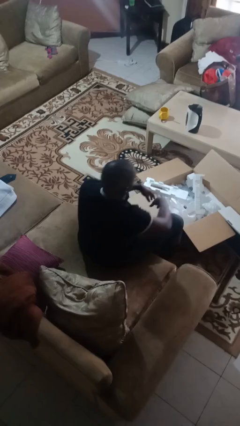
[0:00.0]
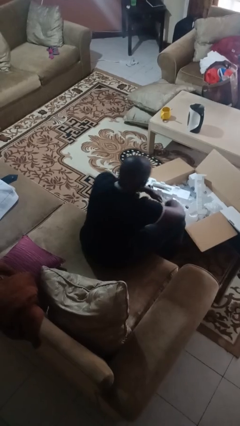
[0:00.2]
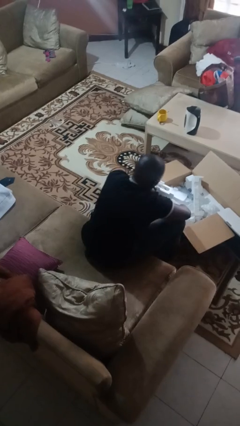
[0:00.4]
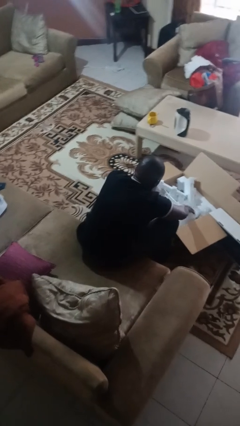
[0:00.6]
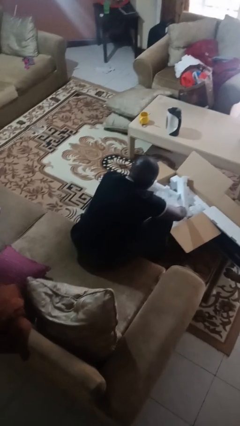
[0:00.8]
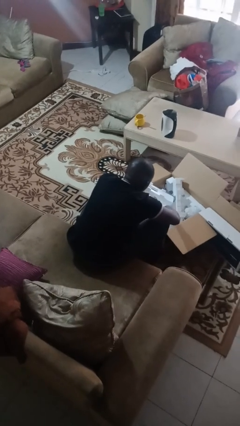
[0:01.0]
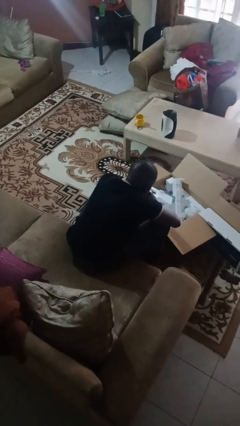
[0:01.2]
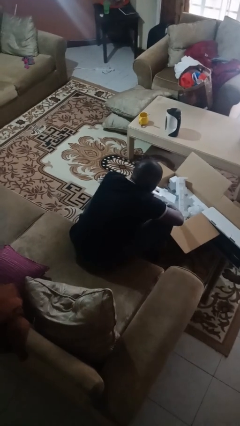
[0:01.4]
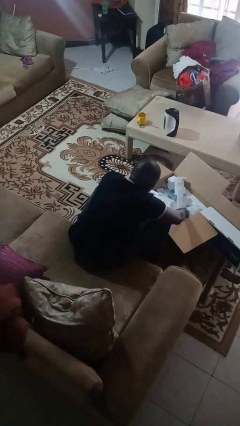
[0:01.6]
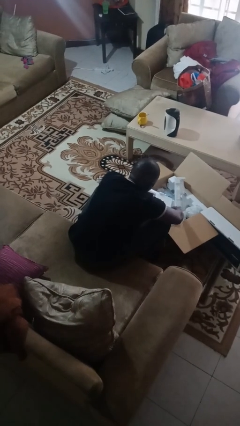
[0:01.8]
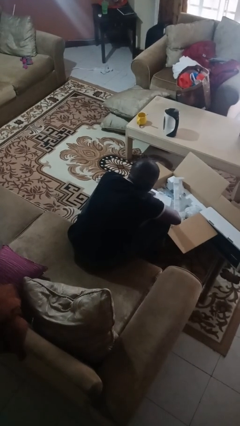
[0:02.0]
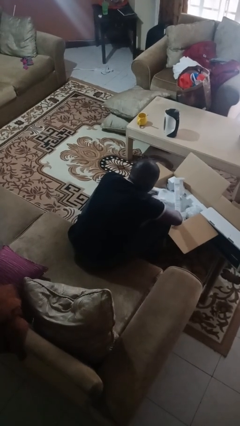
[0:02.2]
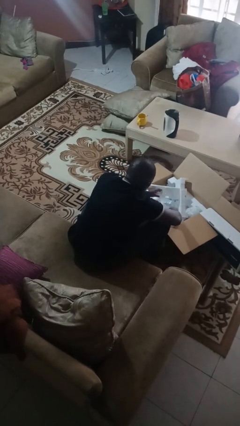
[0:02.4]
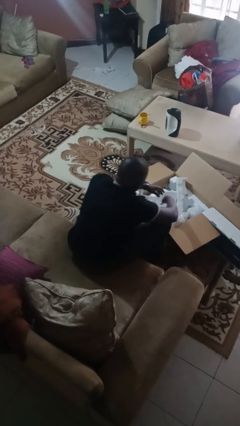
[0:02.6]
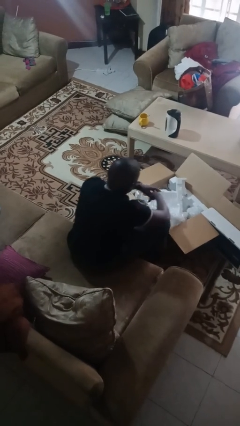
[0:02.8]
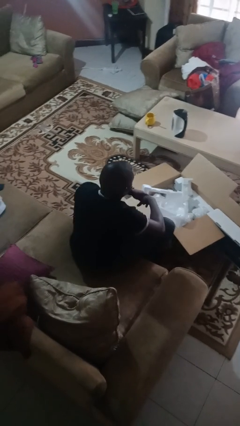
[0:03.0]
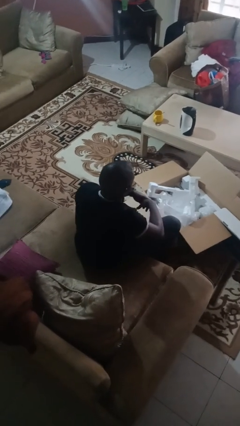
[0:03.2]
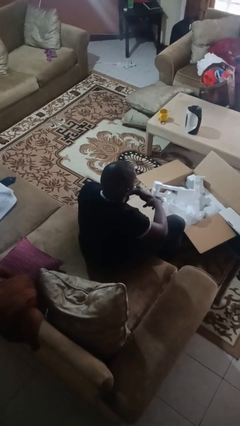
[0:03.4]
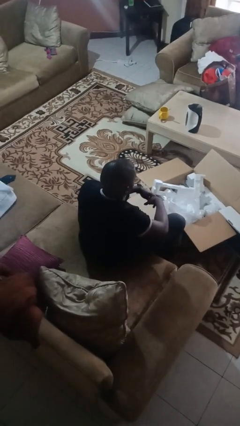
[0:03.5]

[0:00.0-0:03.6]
person searches in box

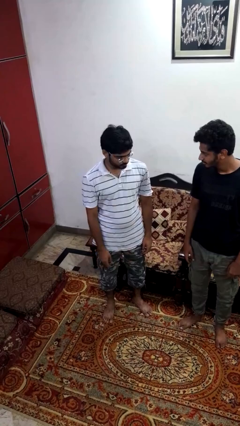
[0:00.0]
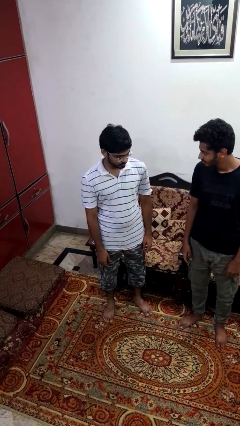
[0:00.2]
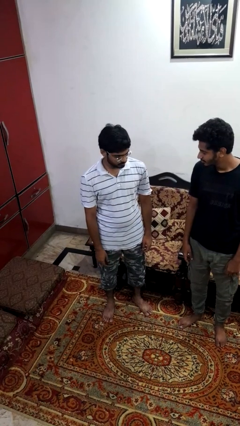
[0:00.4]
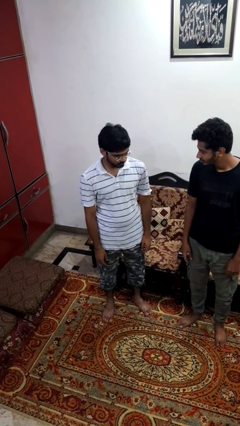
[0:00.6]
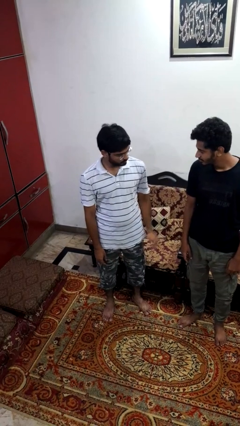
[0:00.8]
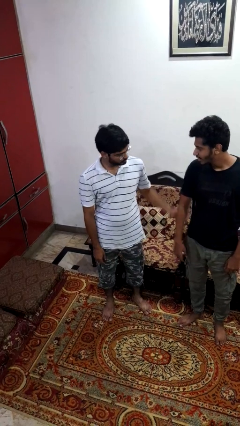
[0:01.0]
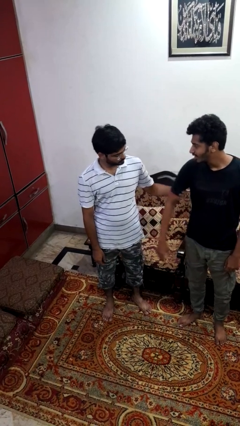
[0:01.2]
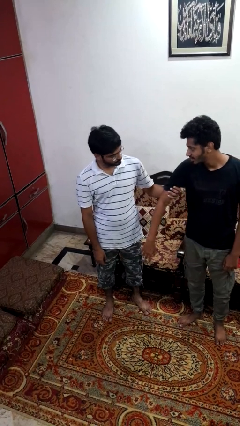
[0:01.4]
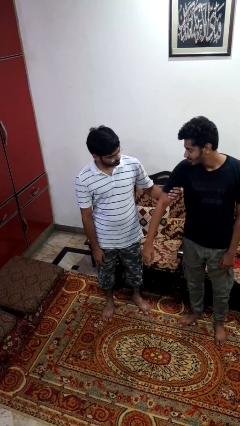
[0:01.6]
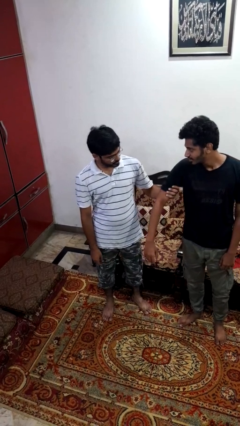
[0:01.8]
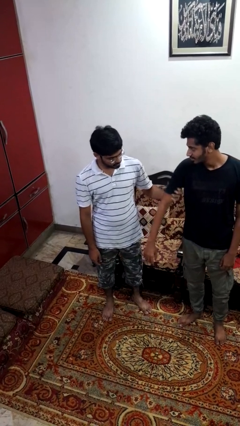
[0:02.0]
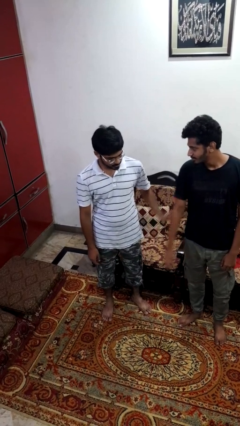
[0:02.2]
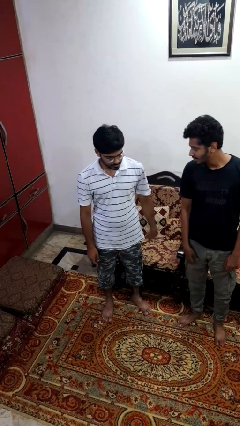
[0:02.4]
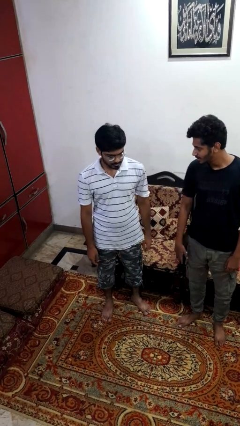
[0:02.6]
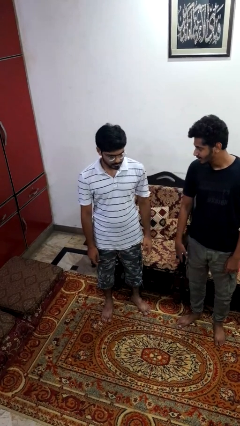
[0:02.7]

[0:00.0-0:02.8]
person grabs person by bicep

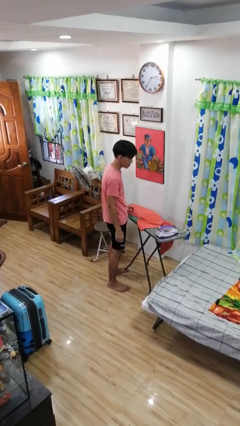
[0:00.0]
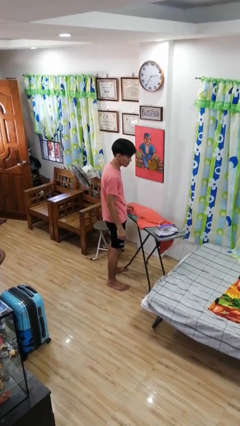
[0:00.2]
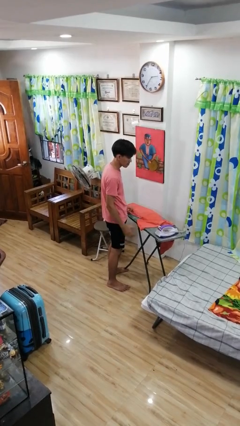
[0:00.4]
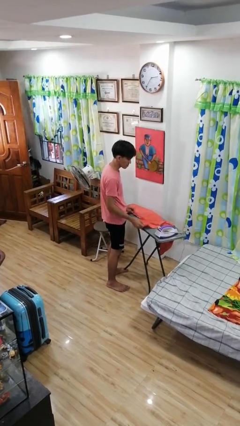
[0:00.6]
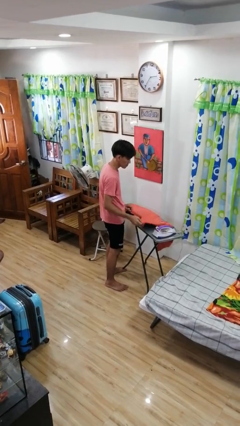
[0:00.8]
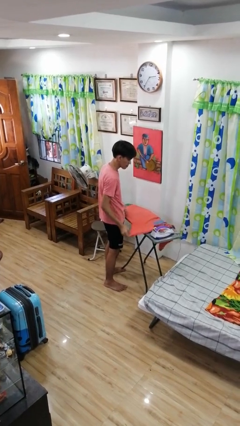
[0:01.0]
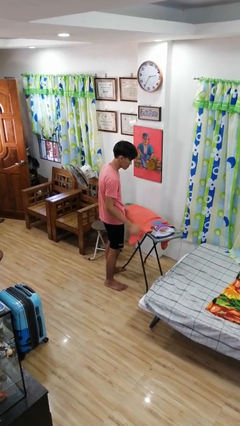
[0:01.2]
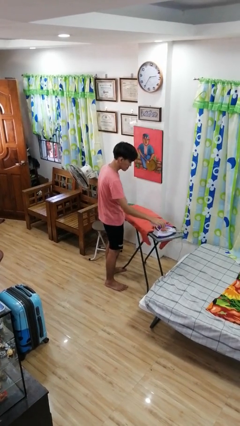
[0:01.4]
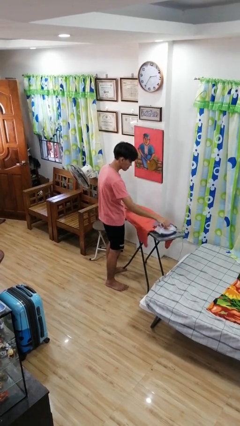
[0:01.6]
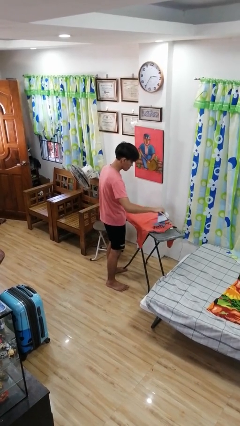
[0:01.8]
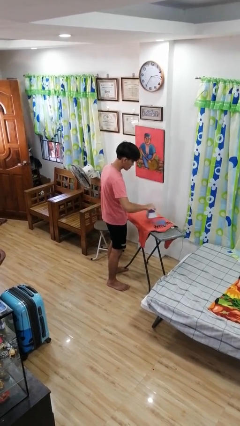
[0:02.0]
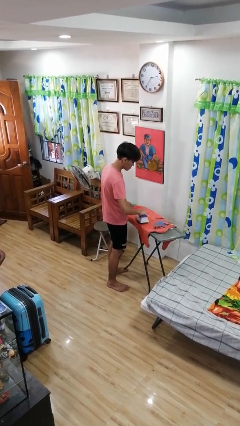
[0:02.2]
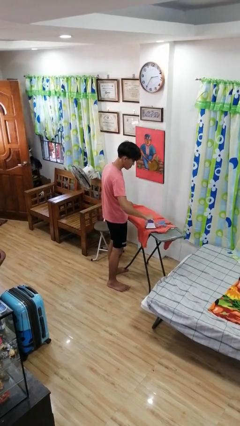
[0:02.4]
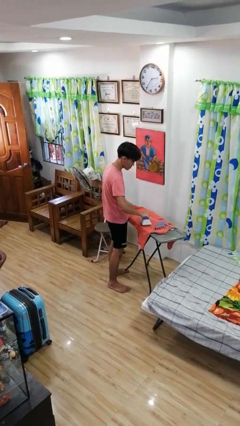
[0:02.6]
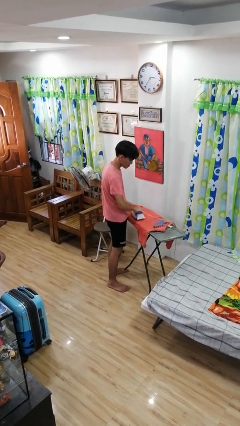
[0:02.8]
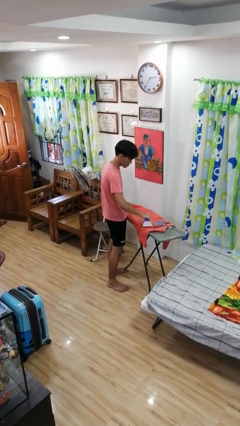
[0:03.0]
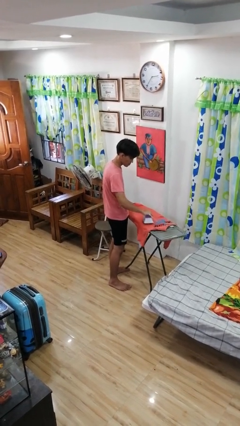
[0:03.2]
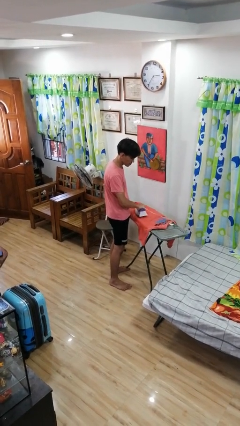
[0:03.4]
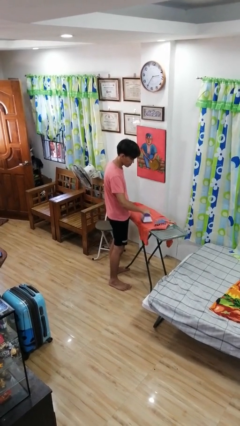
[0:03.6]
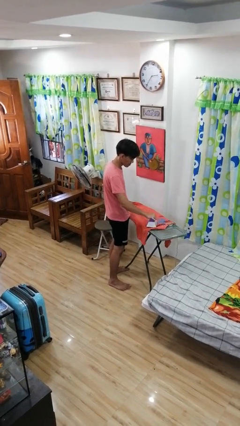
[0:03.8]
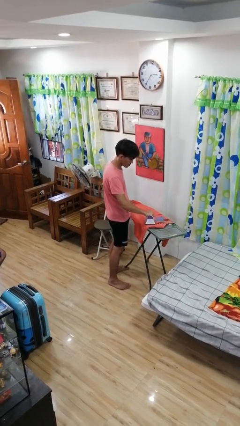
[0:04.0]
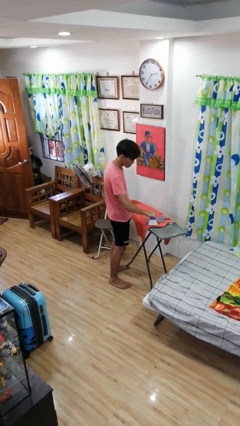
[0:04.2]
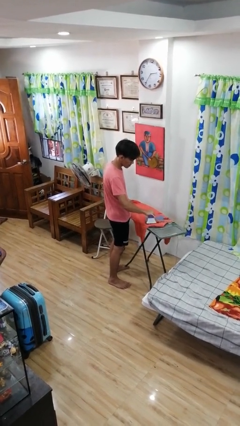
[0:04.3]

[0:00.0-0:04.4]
person irons clothes

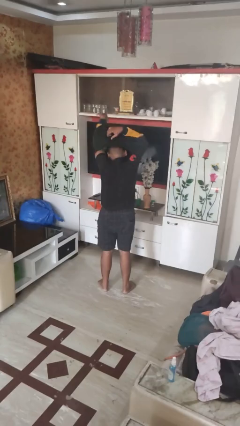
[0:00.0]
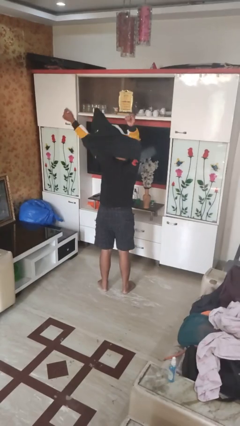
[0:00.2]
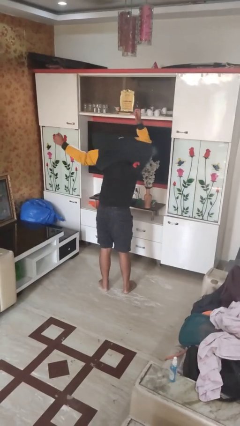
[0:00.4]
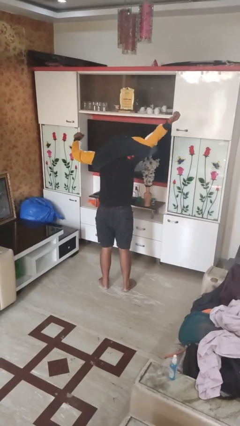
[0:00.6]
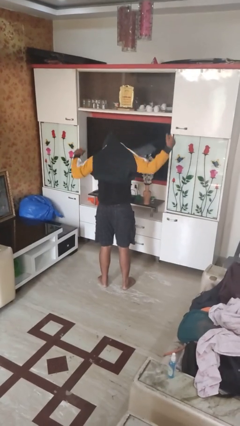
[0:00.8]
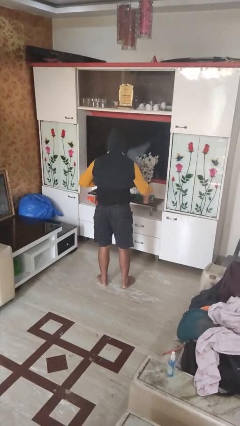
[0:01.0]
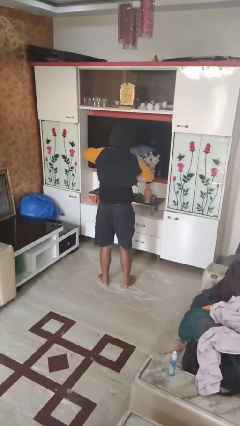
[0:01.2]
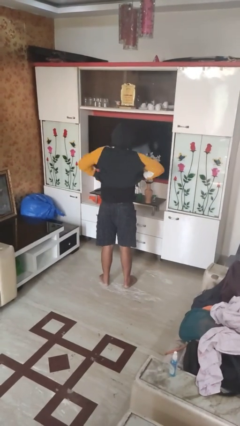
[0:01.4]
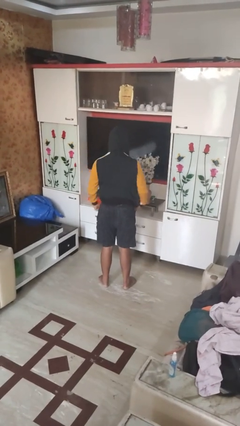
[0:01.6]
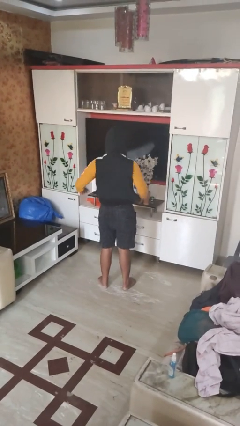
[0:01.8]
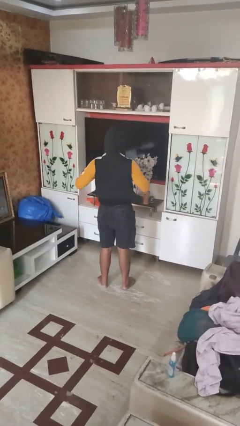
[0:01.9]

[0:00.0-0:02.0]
person puts on hoodie

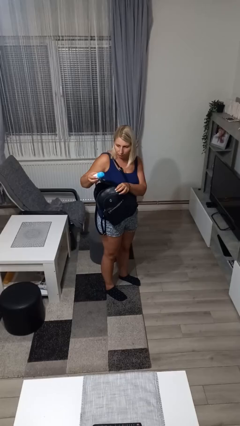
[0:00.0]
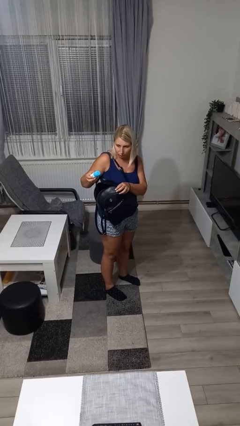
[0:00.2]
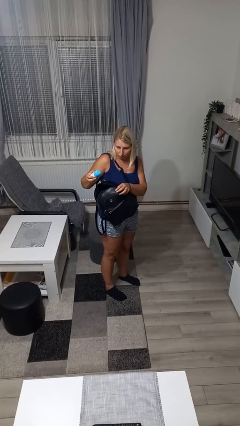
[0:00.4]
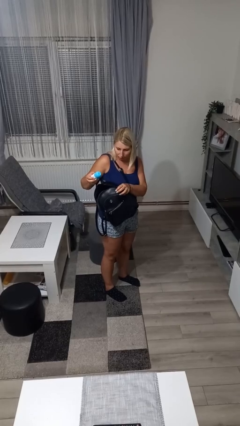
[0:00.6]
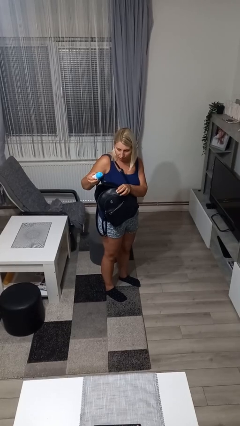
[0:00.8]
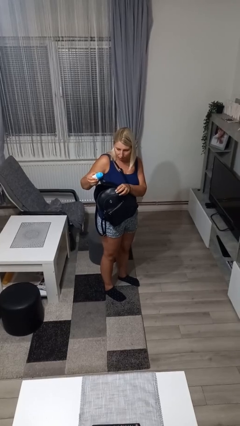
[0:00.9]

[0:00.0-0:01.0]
person takes object from backpack

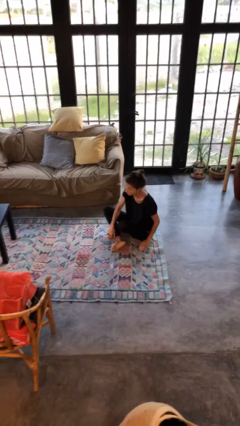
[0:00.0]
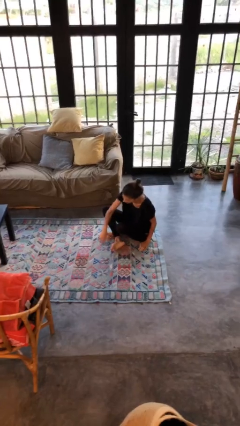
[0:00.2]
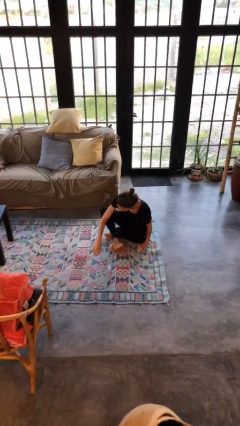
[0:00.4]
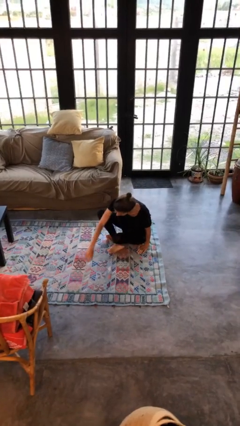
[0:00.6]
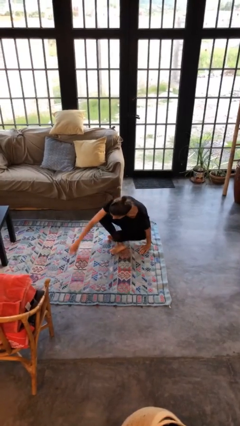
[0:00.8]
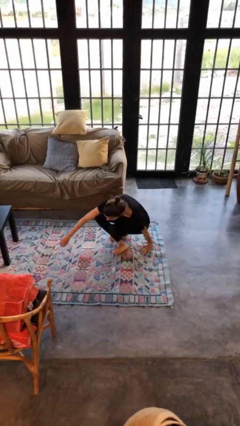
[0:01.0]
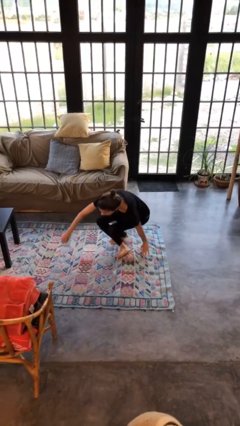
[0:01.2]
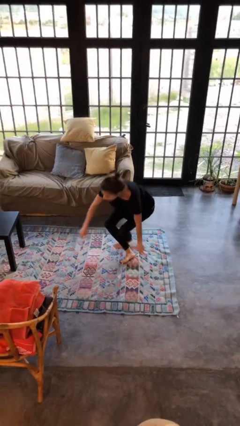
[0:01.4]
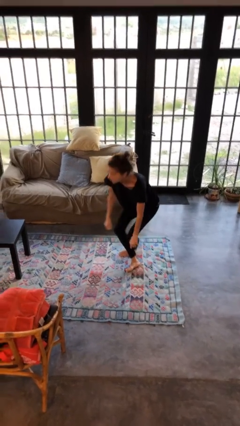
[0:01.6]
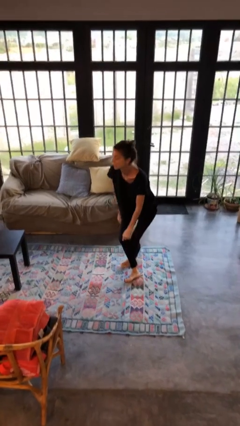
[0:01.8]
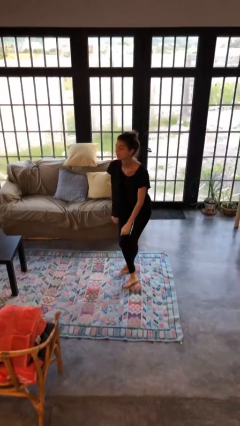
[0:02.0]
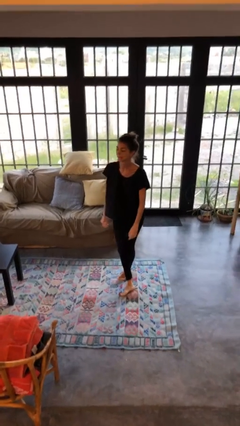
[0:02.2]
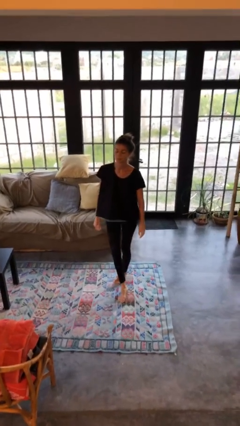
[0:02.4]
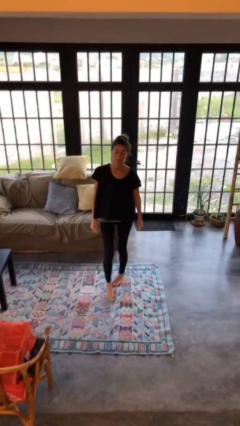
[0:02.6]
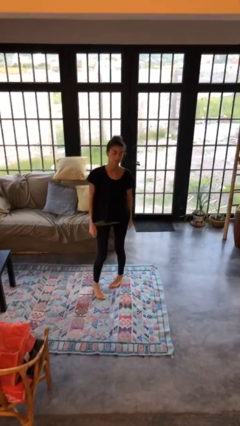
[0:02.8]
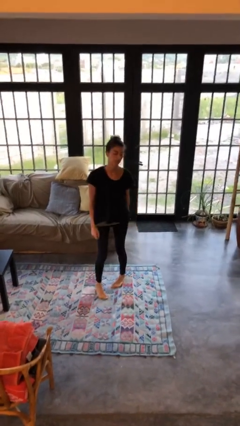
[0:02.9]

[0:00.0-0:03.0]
person stands up from floor

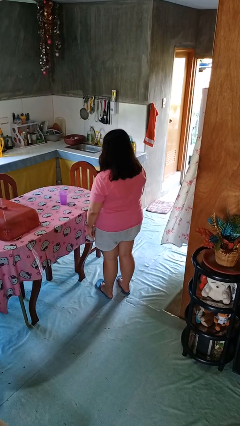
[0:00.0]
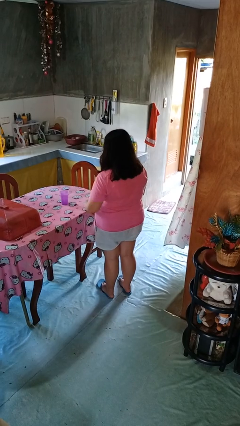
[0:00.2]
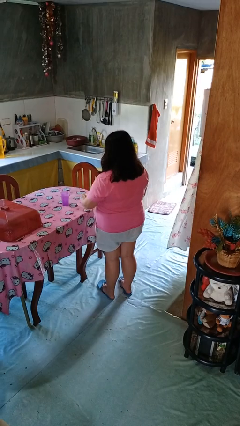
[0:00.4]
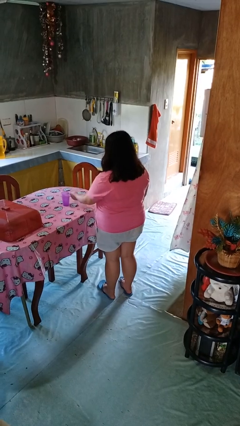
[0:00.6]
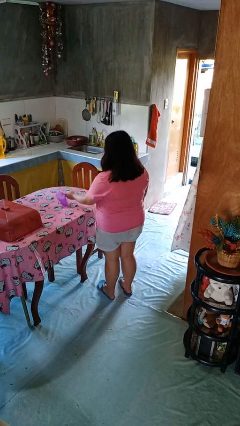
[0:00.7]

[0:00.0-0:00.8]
person knocks over glass
